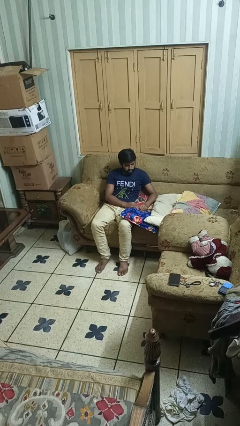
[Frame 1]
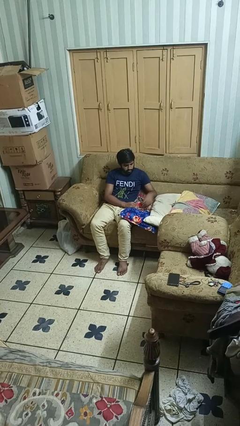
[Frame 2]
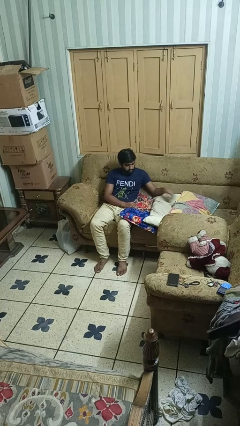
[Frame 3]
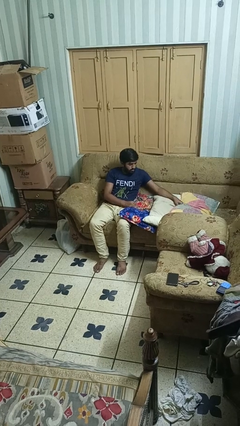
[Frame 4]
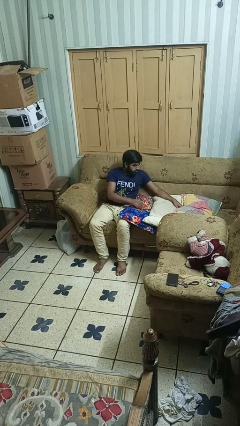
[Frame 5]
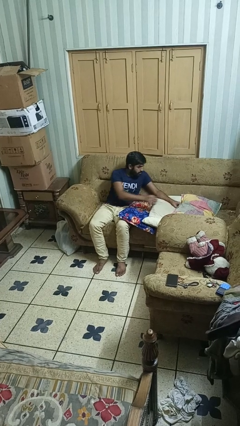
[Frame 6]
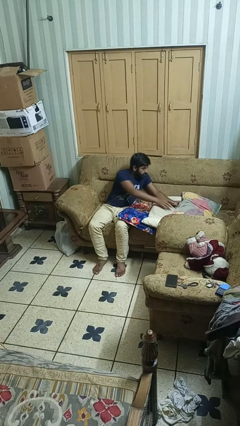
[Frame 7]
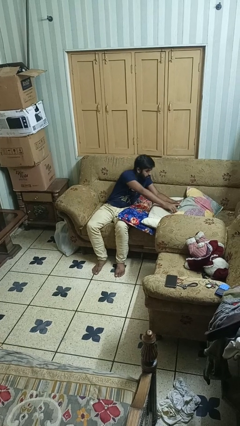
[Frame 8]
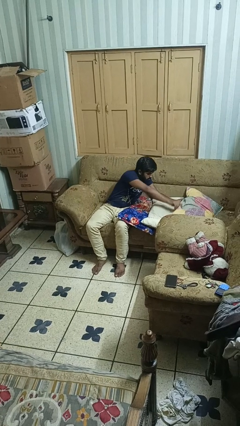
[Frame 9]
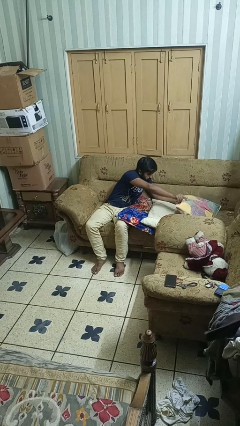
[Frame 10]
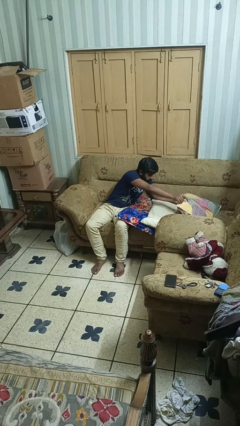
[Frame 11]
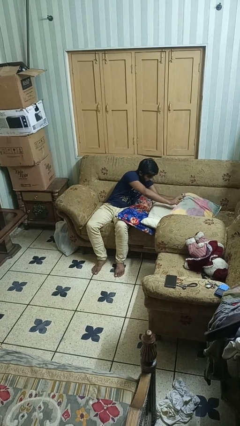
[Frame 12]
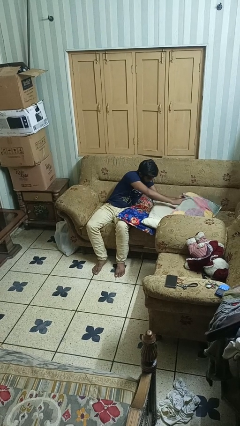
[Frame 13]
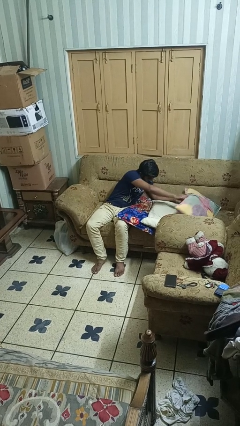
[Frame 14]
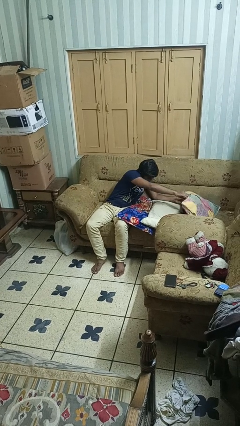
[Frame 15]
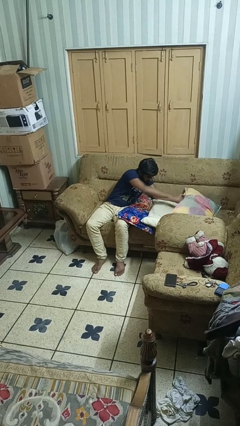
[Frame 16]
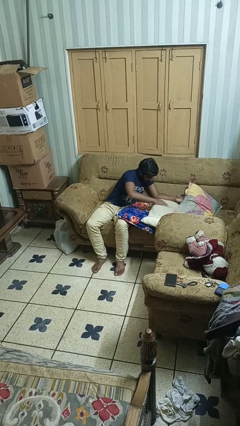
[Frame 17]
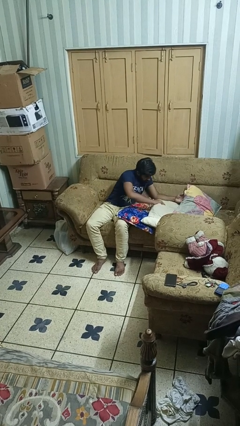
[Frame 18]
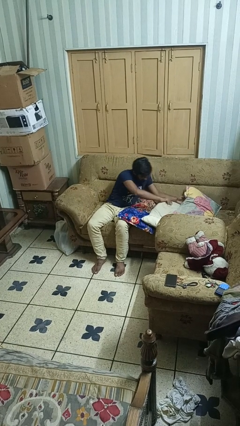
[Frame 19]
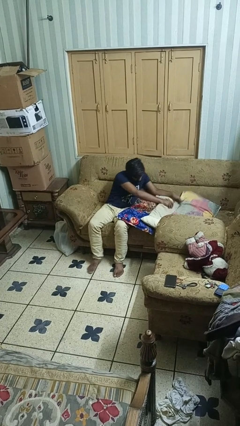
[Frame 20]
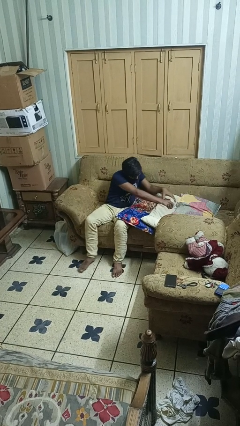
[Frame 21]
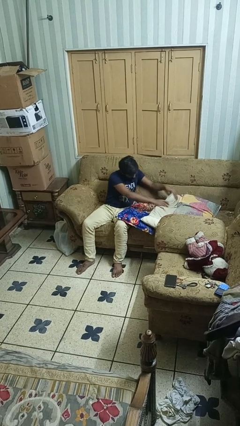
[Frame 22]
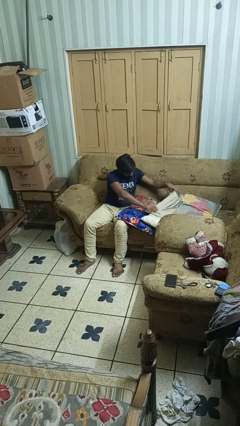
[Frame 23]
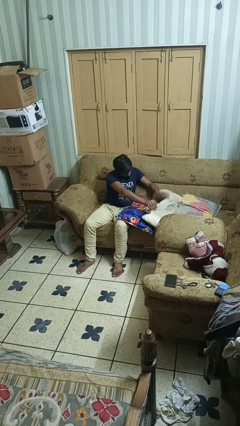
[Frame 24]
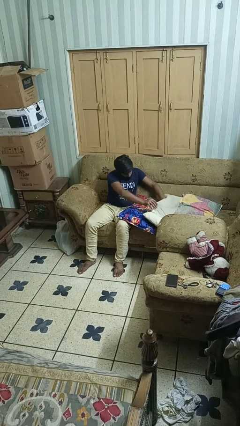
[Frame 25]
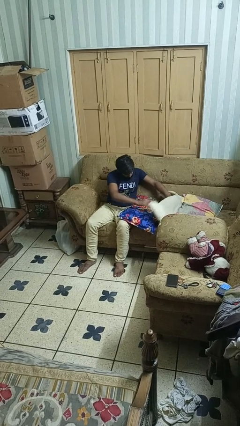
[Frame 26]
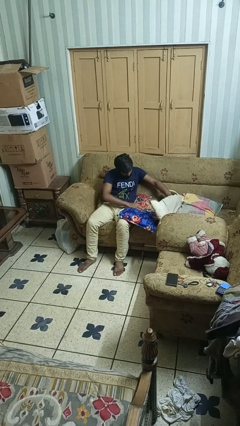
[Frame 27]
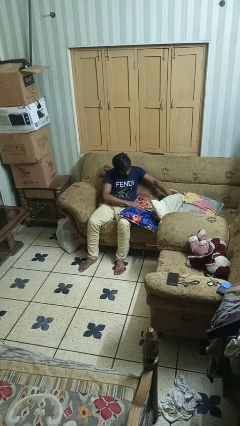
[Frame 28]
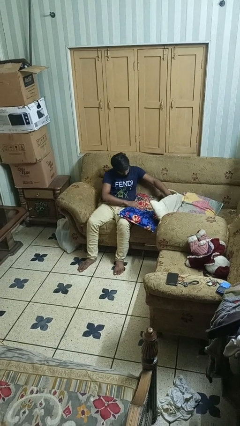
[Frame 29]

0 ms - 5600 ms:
person searches in couch

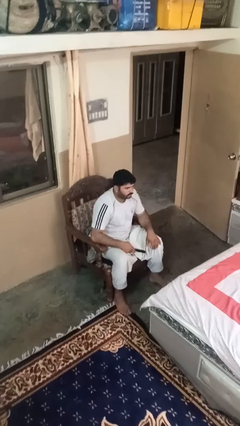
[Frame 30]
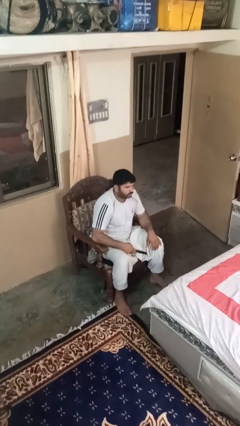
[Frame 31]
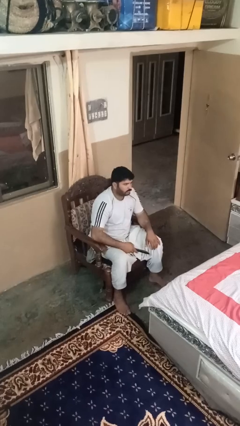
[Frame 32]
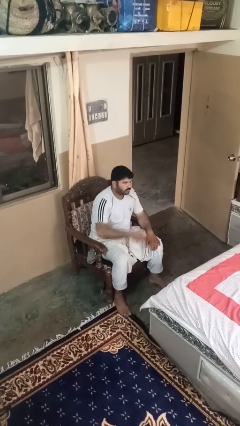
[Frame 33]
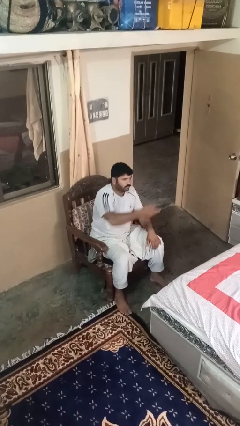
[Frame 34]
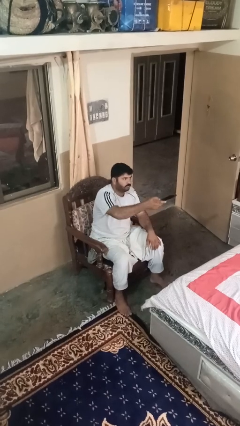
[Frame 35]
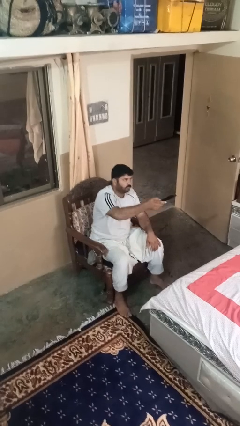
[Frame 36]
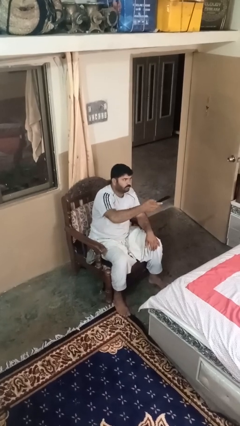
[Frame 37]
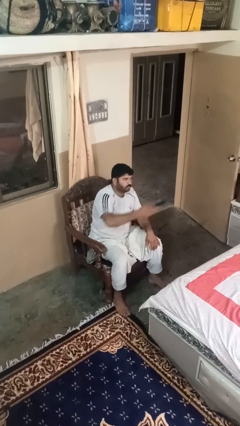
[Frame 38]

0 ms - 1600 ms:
person uses television remote

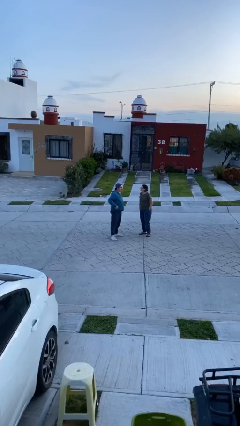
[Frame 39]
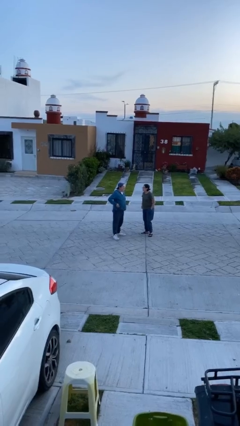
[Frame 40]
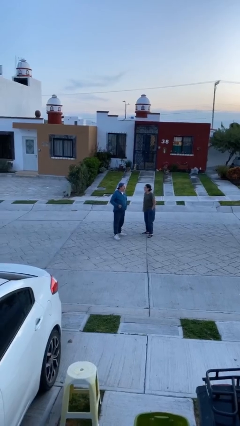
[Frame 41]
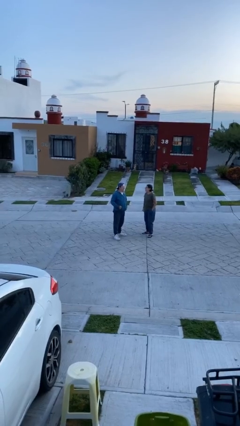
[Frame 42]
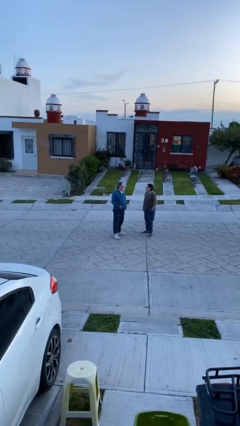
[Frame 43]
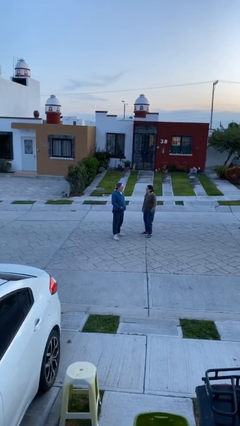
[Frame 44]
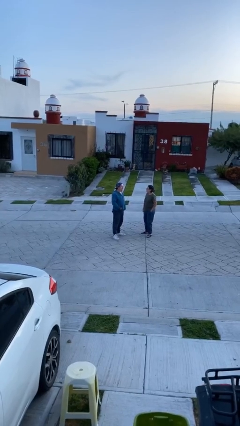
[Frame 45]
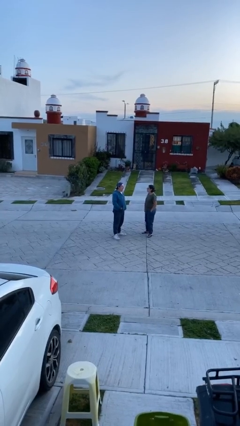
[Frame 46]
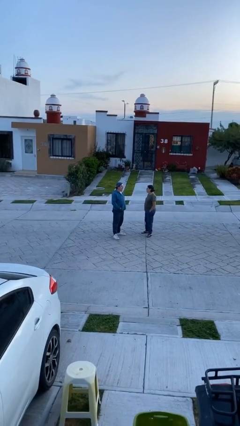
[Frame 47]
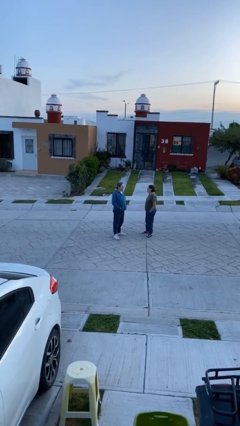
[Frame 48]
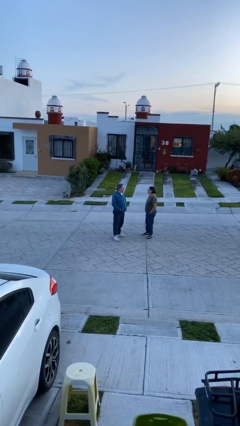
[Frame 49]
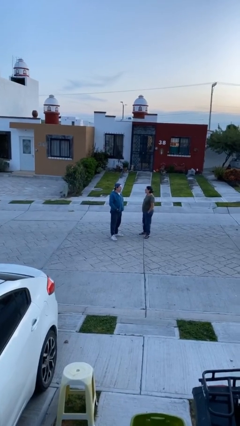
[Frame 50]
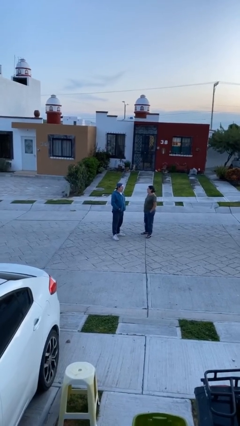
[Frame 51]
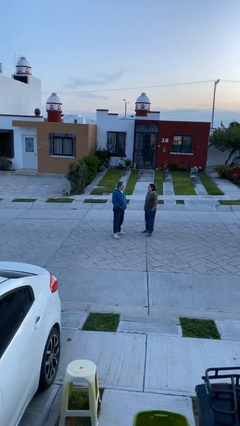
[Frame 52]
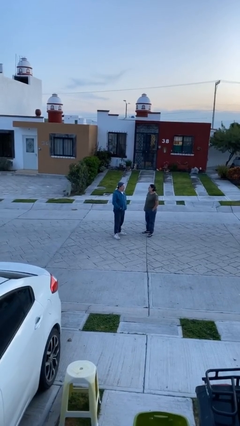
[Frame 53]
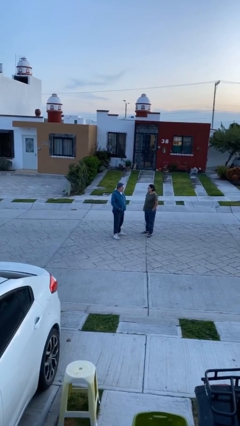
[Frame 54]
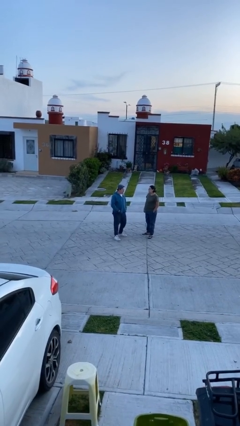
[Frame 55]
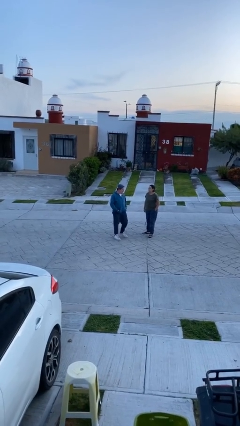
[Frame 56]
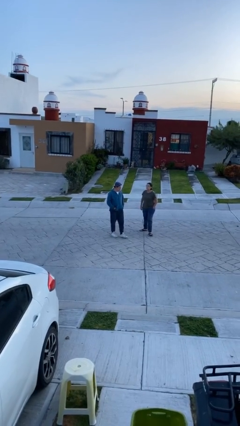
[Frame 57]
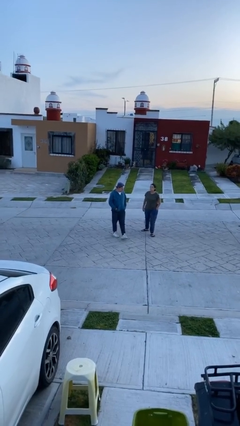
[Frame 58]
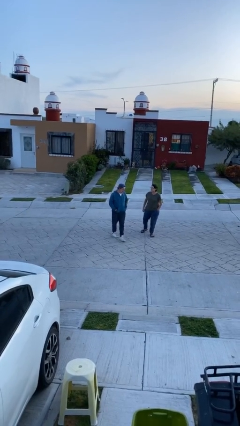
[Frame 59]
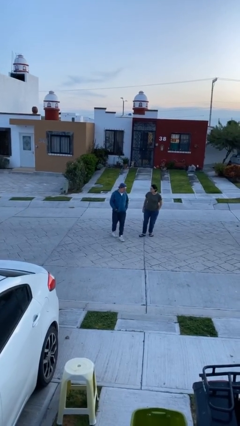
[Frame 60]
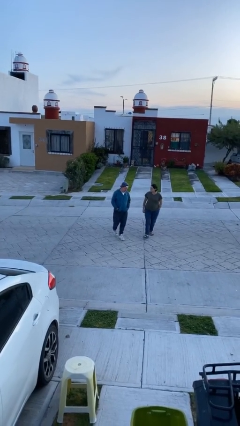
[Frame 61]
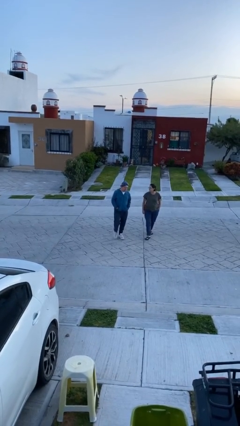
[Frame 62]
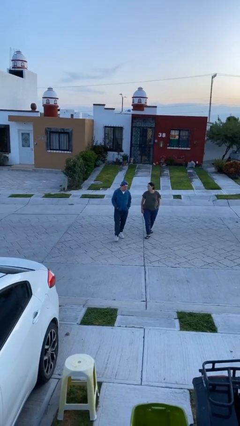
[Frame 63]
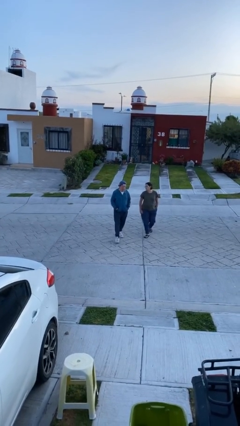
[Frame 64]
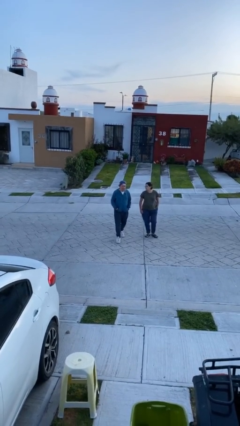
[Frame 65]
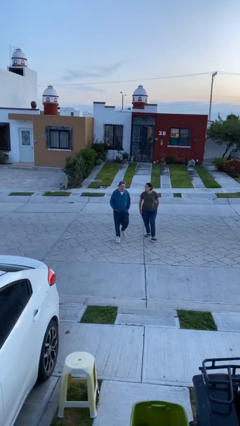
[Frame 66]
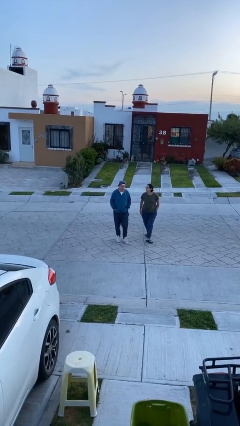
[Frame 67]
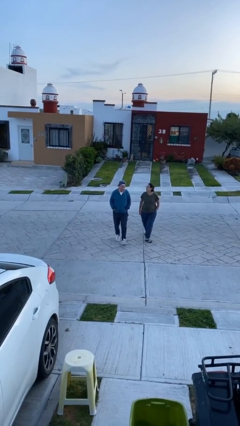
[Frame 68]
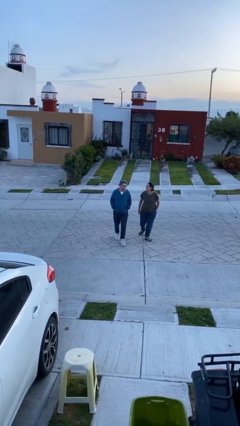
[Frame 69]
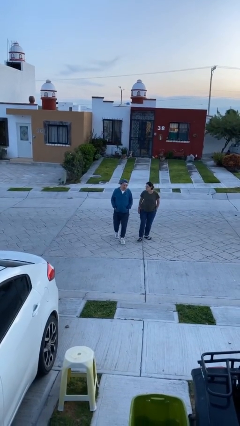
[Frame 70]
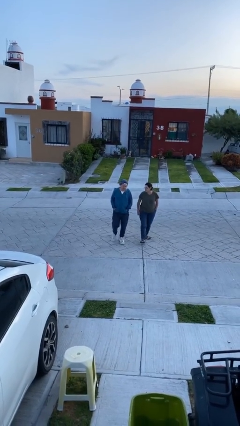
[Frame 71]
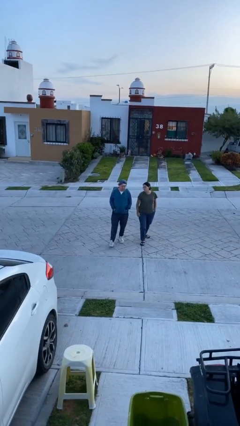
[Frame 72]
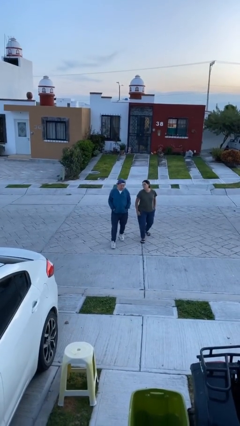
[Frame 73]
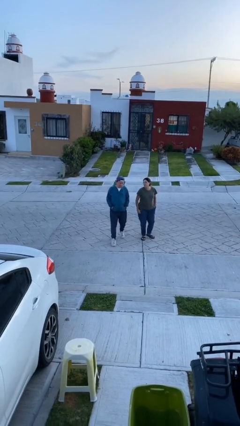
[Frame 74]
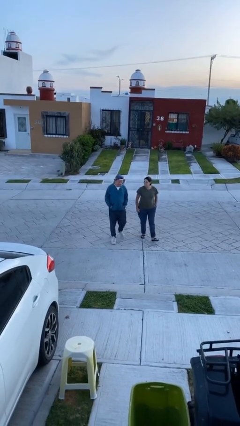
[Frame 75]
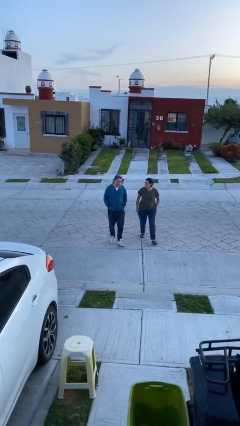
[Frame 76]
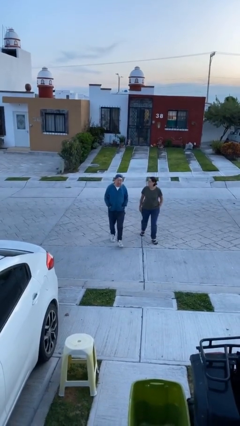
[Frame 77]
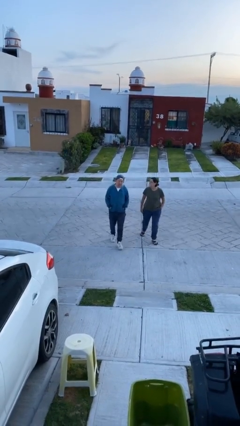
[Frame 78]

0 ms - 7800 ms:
person talks to person

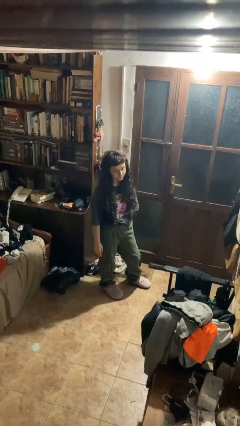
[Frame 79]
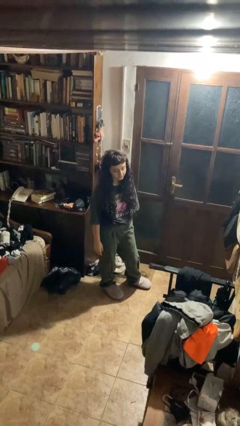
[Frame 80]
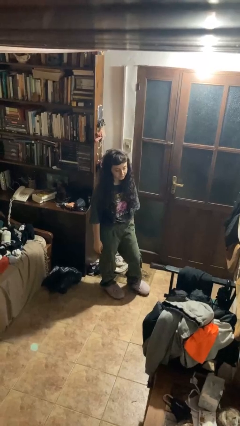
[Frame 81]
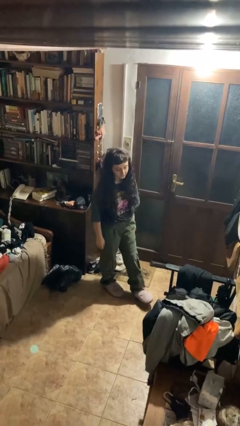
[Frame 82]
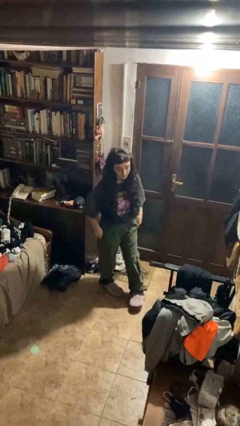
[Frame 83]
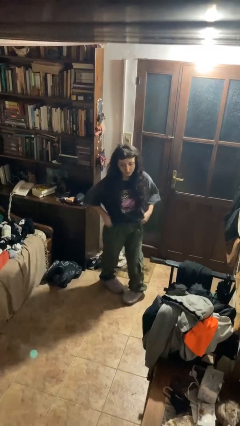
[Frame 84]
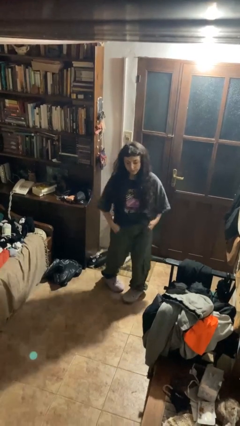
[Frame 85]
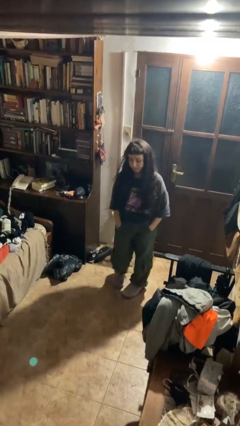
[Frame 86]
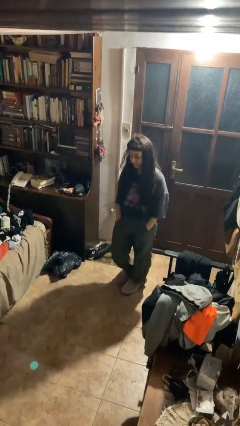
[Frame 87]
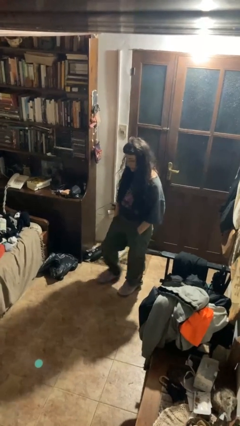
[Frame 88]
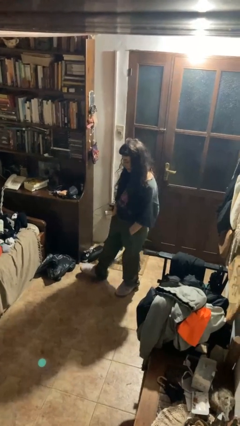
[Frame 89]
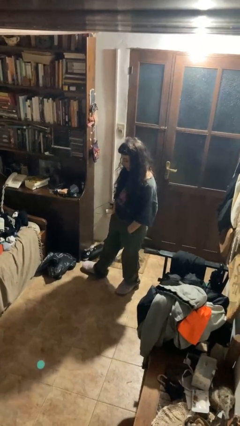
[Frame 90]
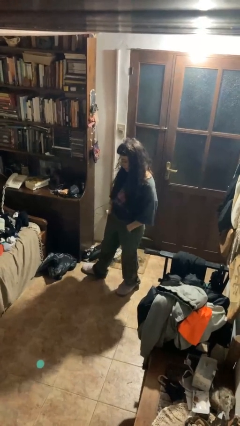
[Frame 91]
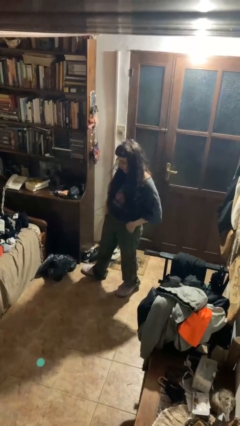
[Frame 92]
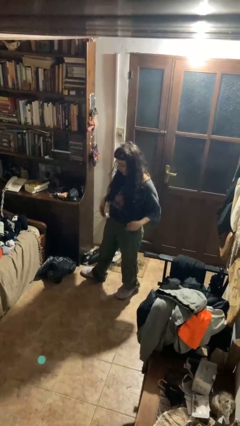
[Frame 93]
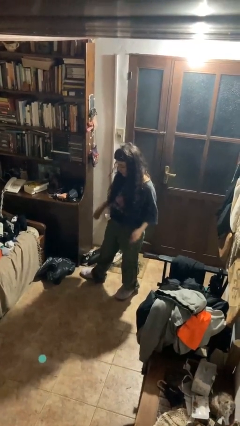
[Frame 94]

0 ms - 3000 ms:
person puts hands in back pockets
